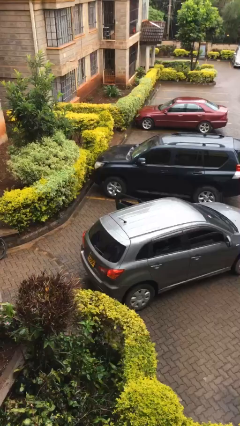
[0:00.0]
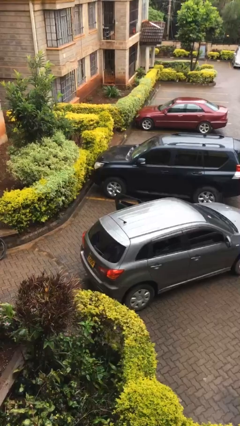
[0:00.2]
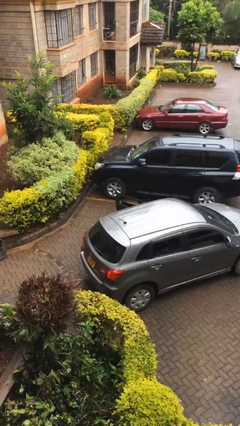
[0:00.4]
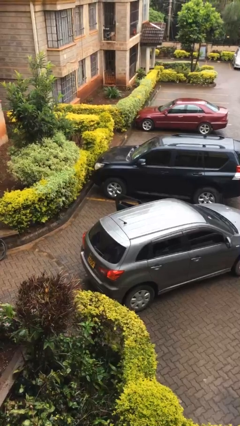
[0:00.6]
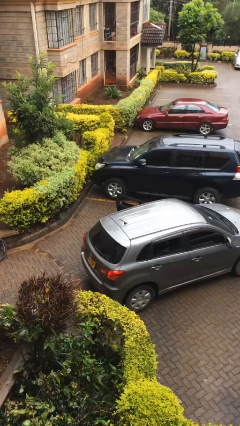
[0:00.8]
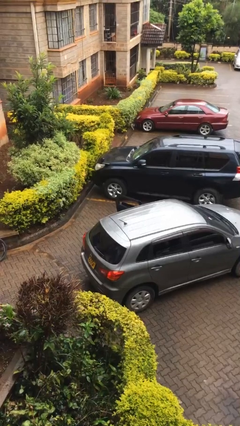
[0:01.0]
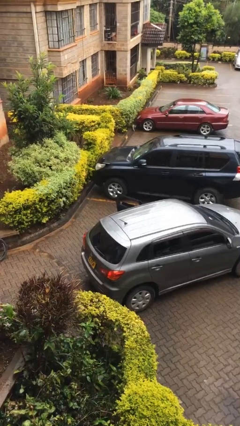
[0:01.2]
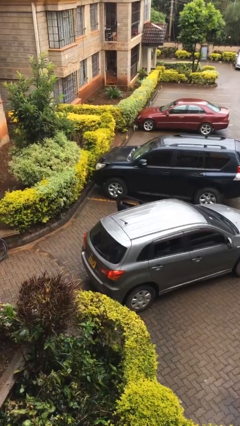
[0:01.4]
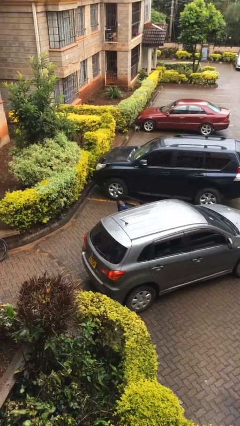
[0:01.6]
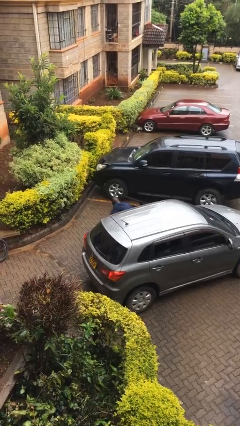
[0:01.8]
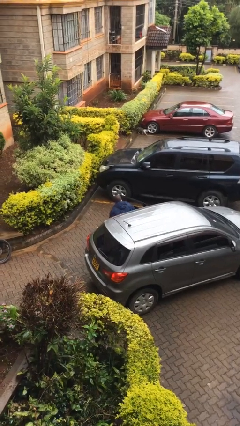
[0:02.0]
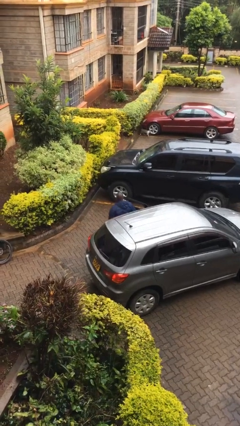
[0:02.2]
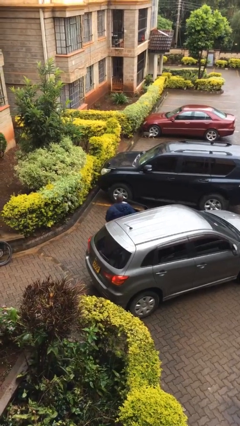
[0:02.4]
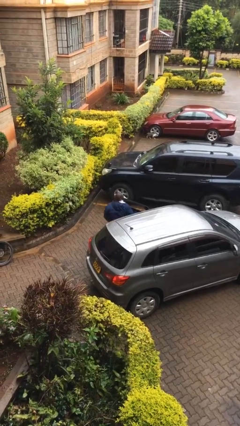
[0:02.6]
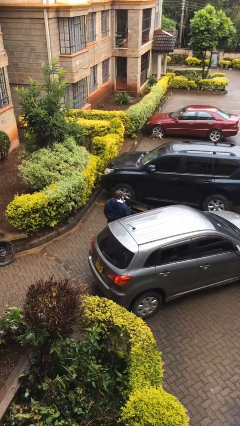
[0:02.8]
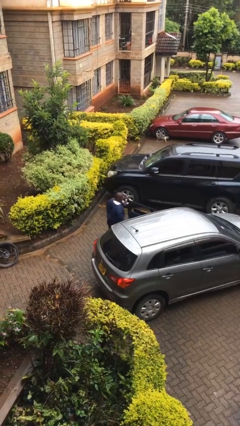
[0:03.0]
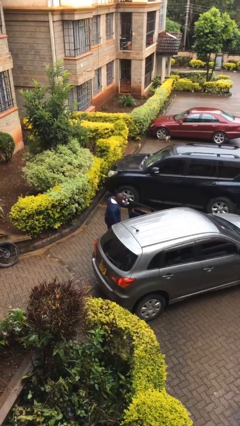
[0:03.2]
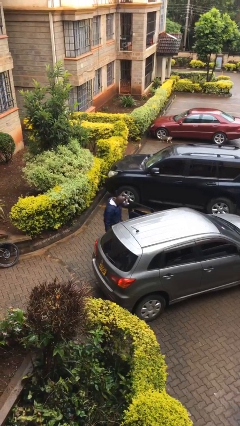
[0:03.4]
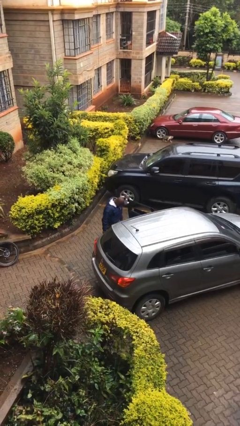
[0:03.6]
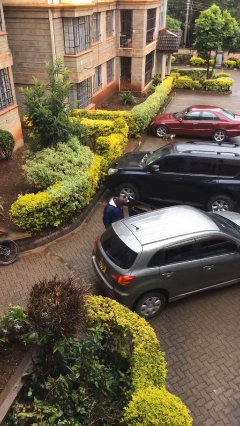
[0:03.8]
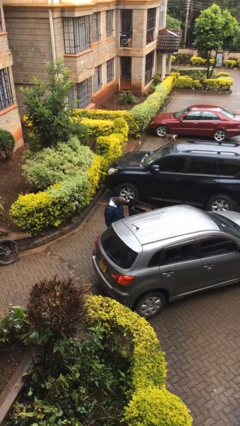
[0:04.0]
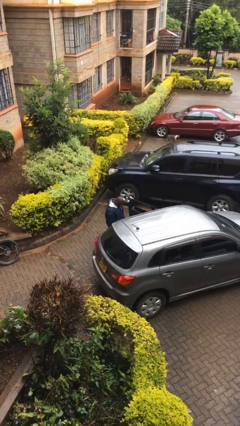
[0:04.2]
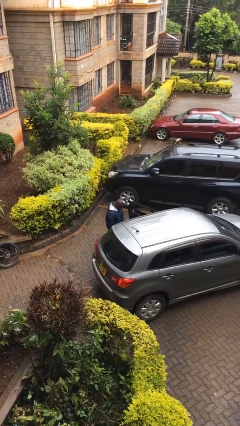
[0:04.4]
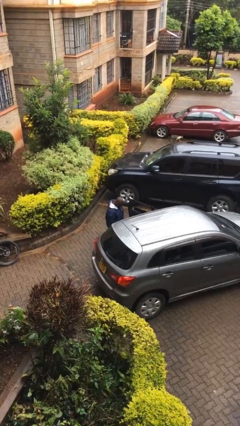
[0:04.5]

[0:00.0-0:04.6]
person exits car

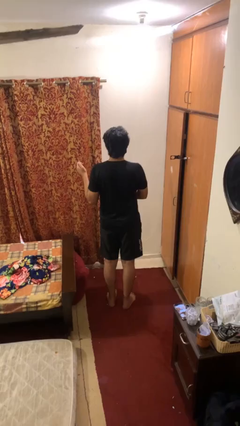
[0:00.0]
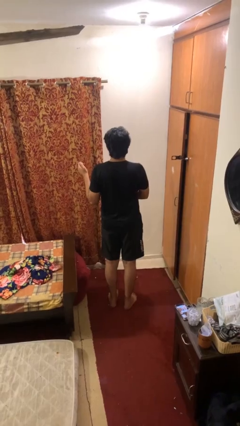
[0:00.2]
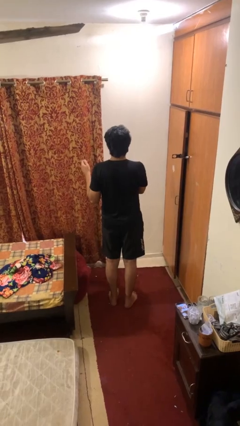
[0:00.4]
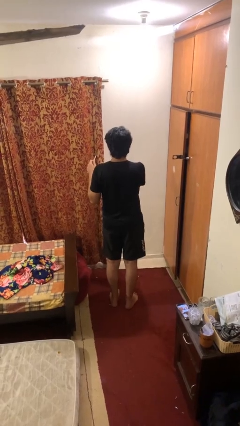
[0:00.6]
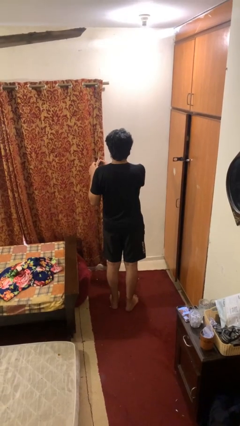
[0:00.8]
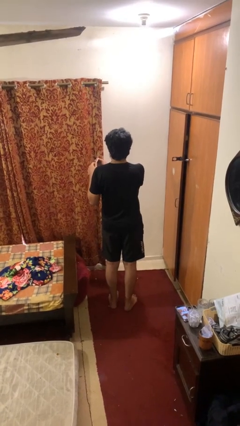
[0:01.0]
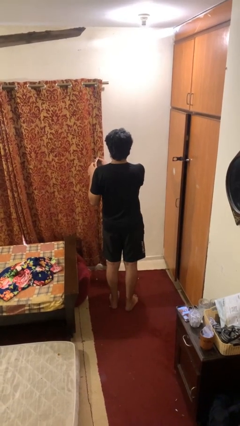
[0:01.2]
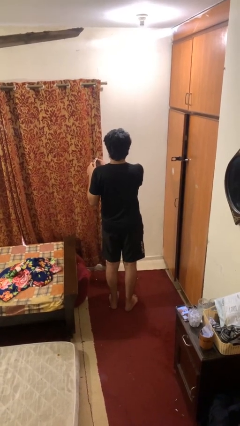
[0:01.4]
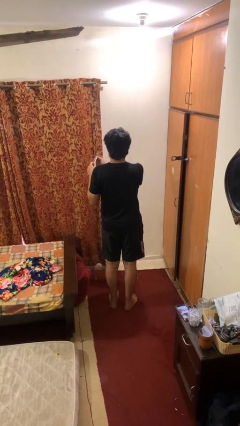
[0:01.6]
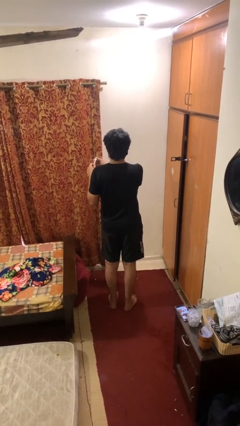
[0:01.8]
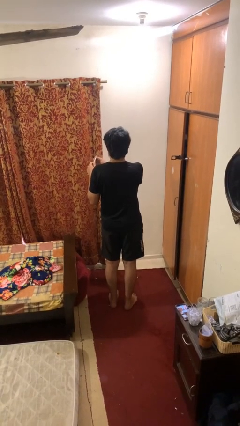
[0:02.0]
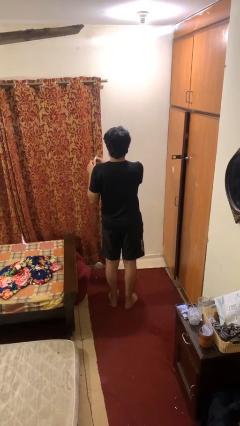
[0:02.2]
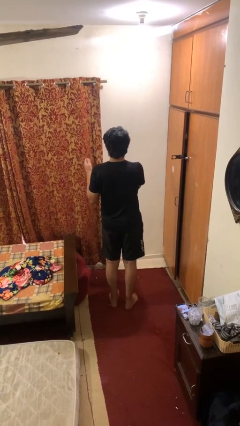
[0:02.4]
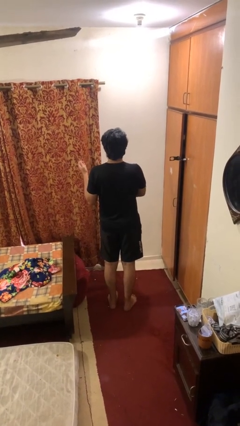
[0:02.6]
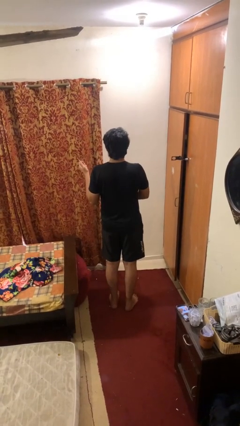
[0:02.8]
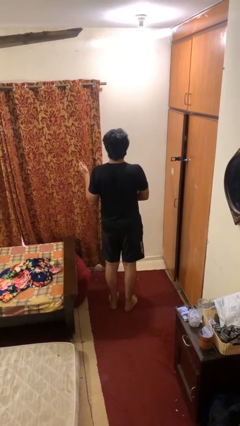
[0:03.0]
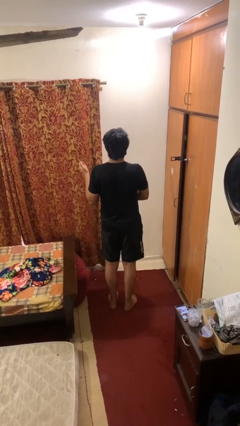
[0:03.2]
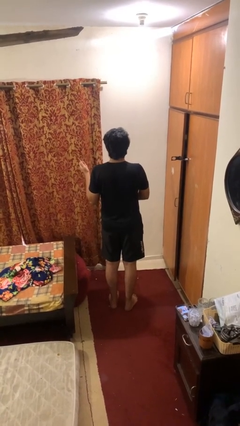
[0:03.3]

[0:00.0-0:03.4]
person files fingernails

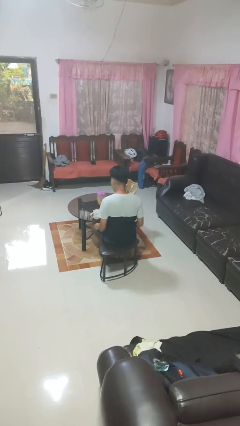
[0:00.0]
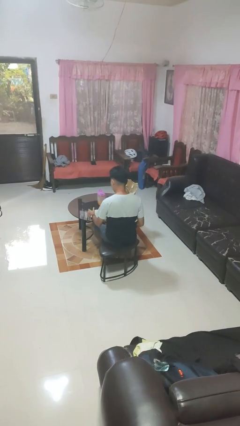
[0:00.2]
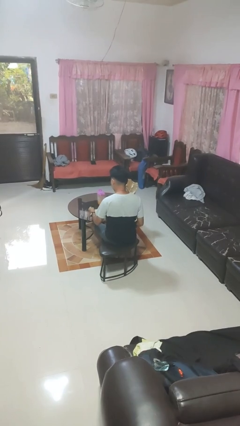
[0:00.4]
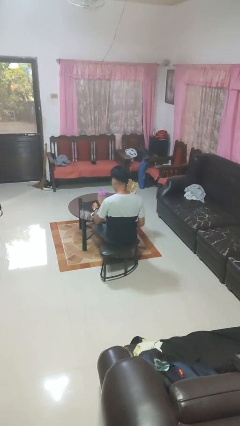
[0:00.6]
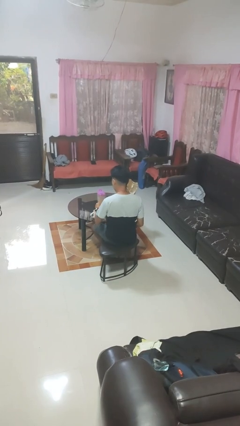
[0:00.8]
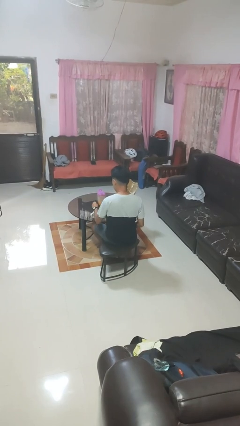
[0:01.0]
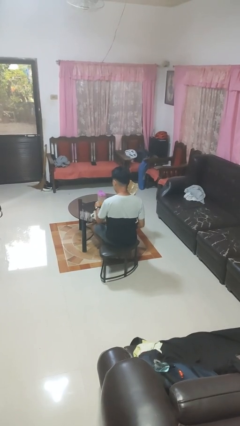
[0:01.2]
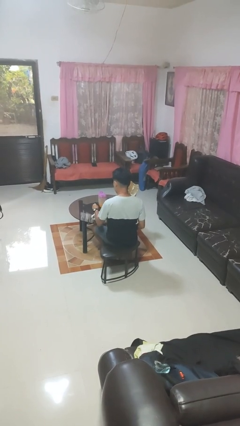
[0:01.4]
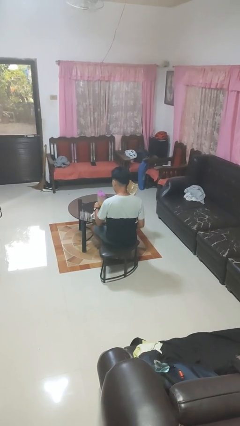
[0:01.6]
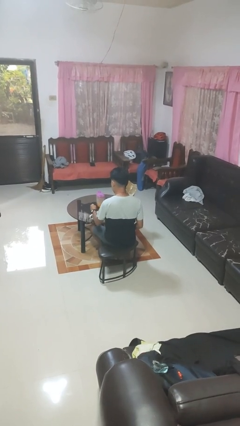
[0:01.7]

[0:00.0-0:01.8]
person stirs mug

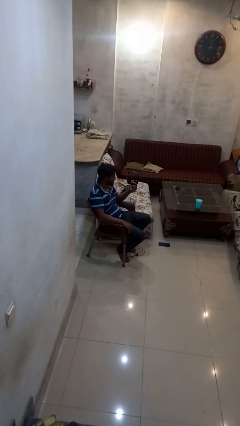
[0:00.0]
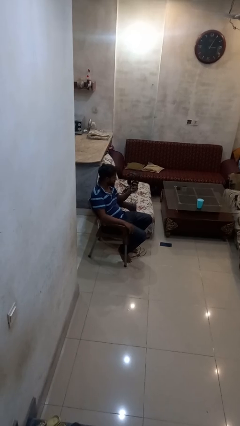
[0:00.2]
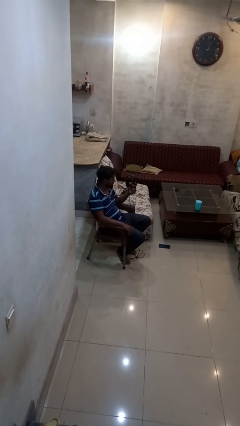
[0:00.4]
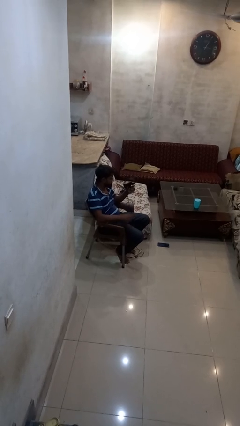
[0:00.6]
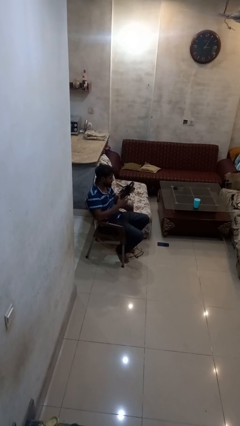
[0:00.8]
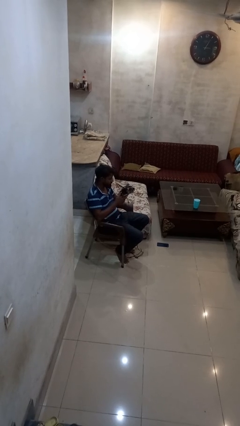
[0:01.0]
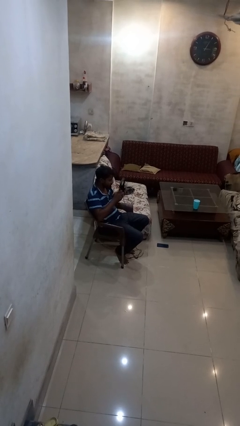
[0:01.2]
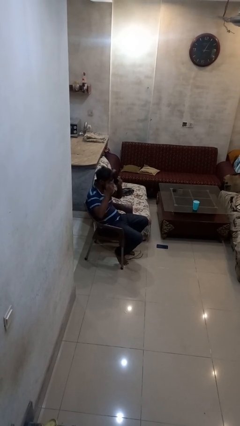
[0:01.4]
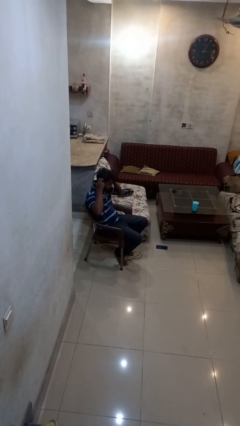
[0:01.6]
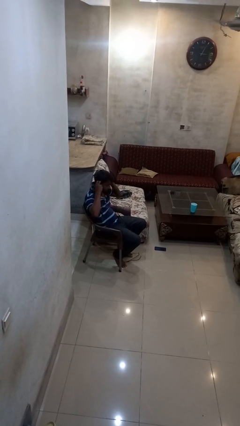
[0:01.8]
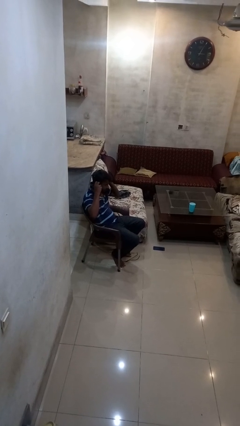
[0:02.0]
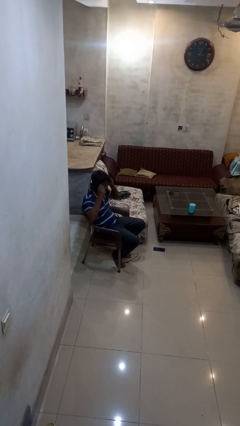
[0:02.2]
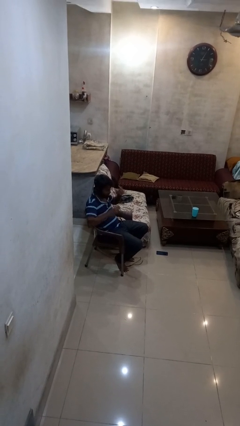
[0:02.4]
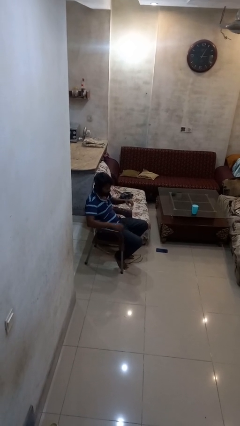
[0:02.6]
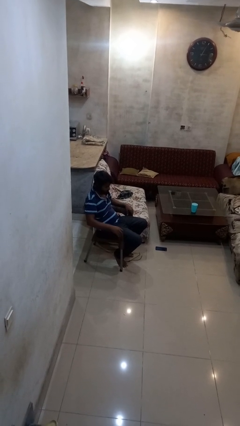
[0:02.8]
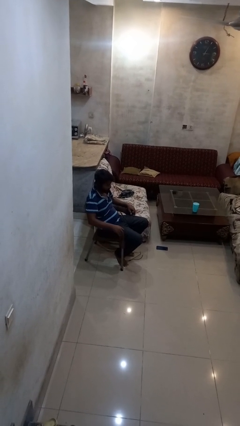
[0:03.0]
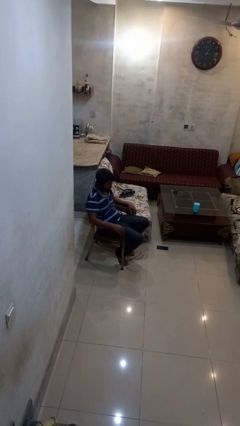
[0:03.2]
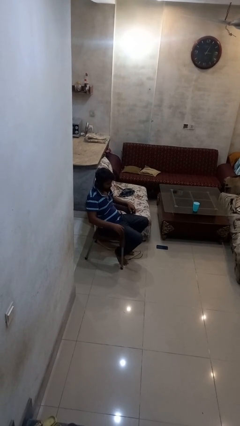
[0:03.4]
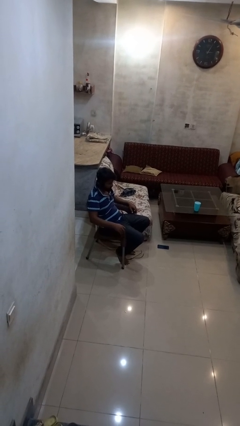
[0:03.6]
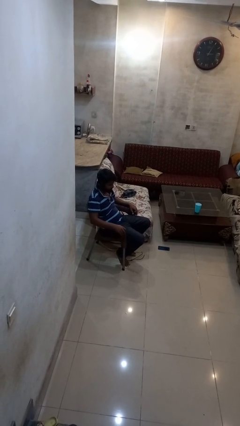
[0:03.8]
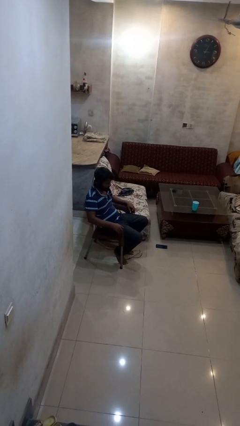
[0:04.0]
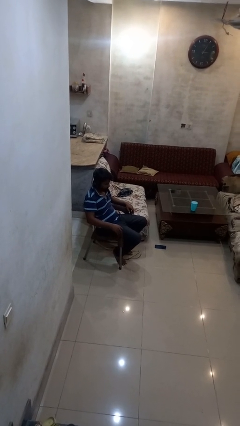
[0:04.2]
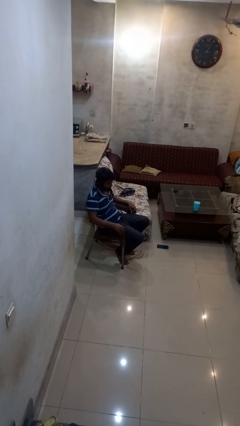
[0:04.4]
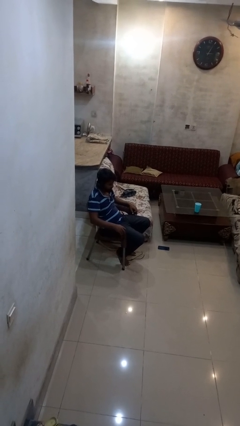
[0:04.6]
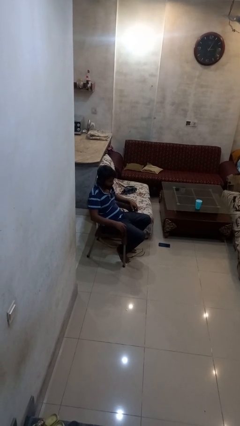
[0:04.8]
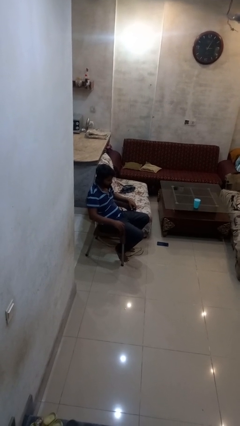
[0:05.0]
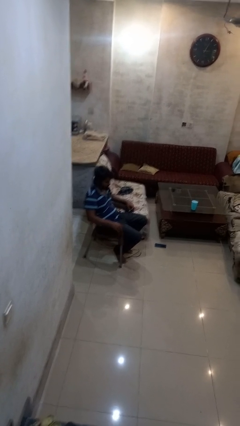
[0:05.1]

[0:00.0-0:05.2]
person puts on headphones

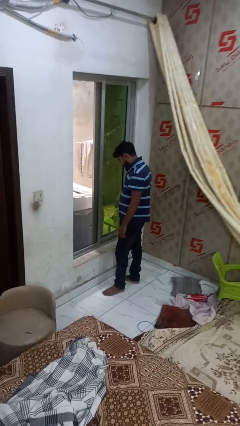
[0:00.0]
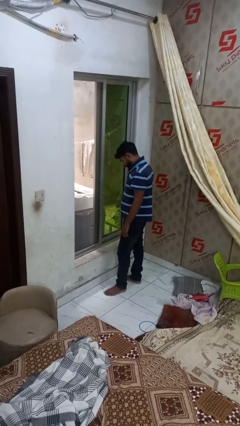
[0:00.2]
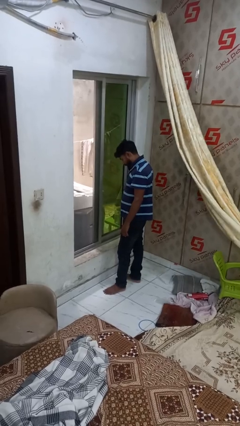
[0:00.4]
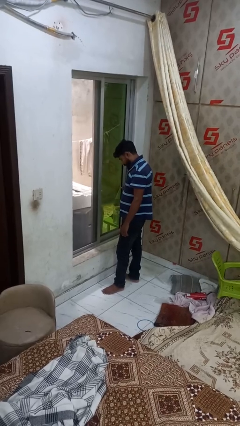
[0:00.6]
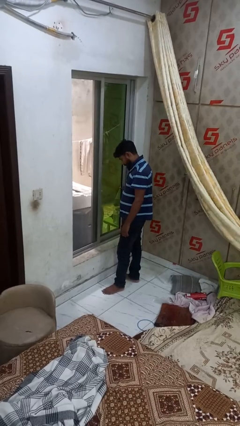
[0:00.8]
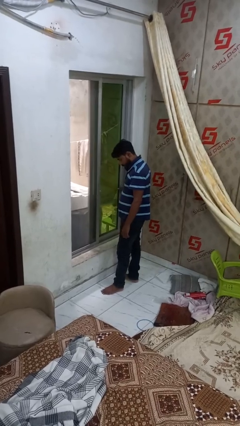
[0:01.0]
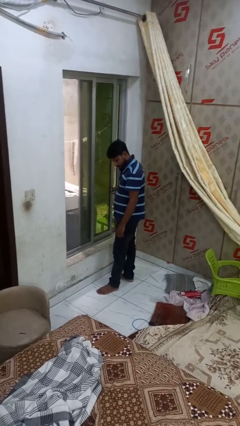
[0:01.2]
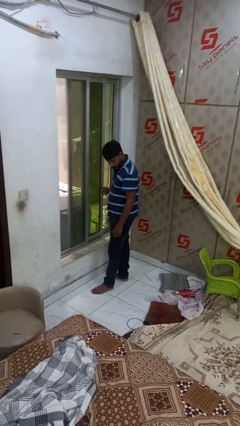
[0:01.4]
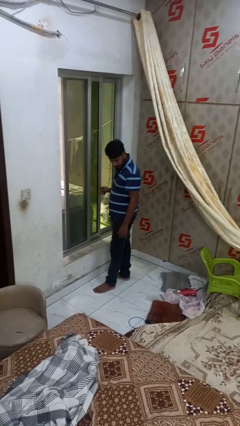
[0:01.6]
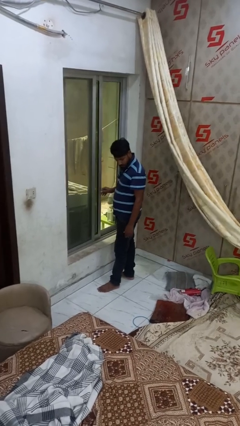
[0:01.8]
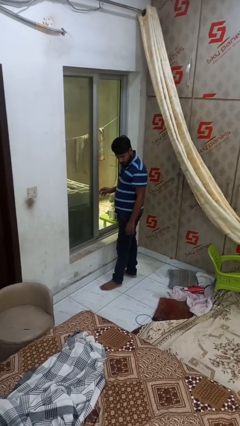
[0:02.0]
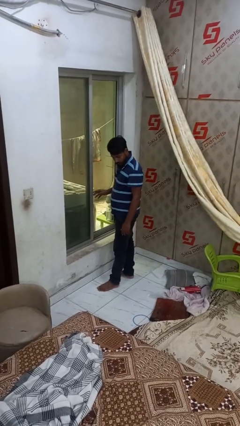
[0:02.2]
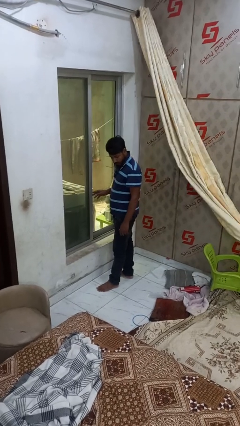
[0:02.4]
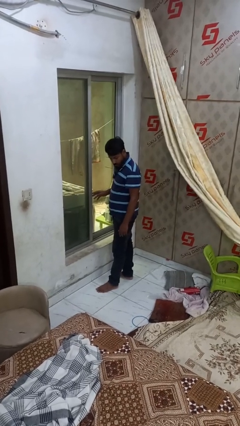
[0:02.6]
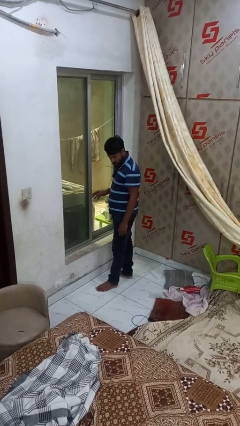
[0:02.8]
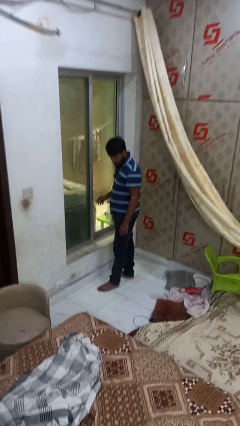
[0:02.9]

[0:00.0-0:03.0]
person closes sliding door
